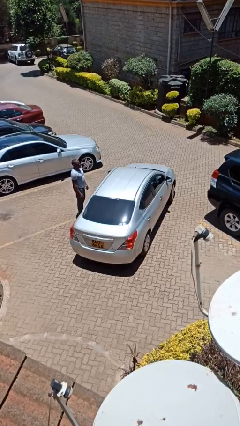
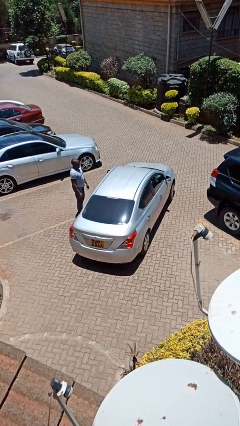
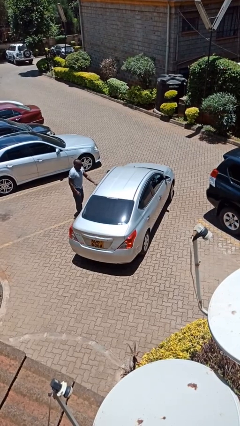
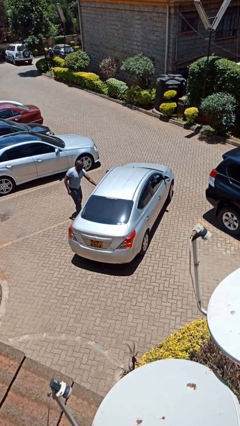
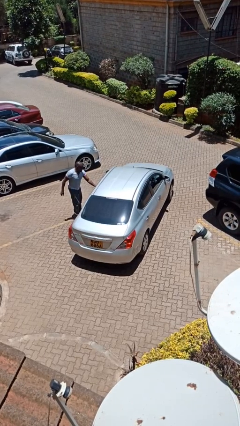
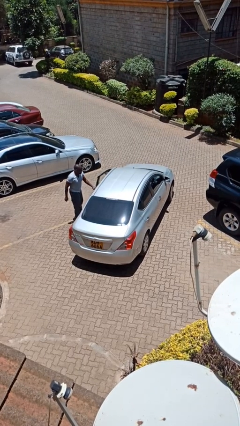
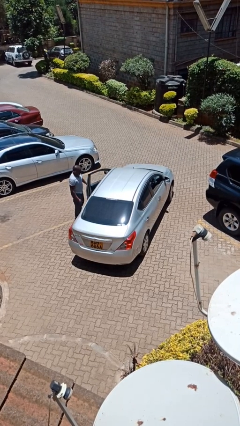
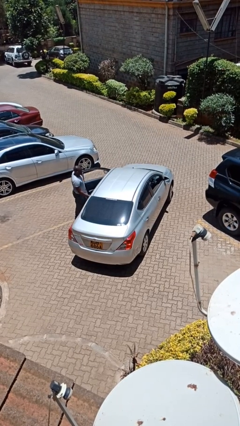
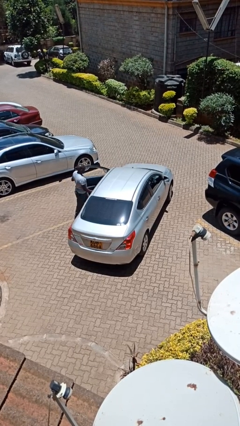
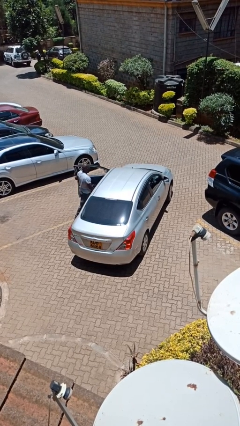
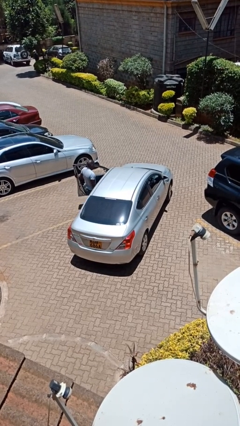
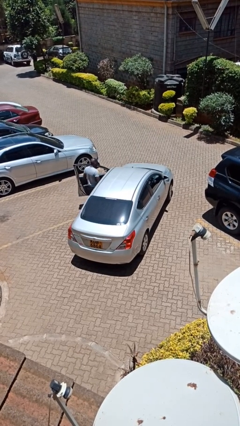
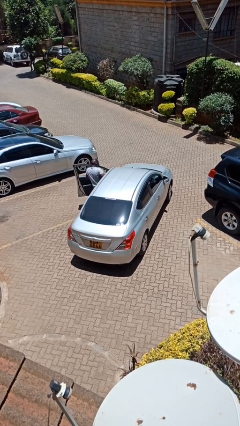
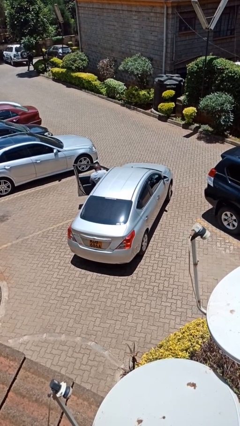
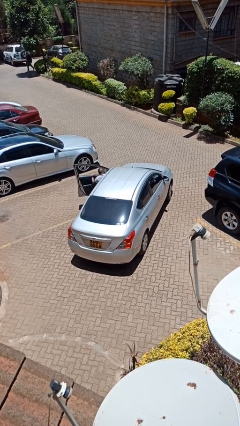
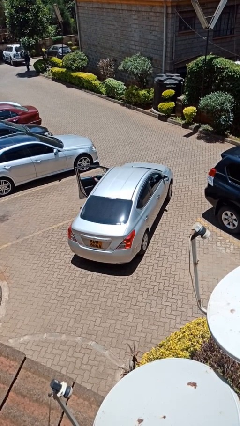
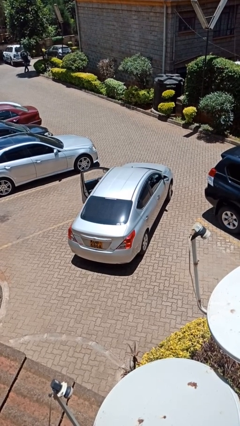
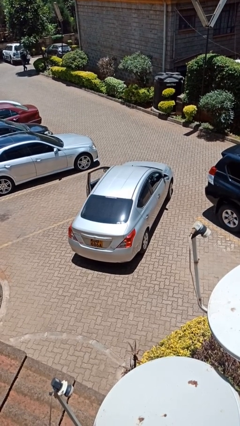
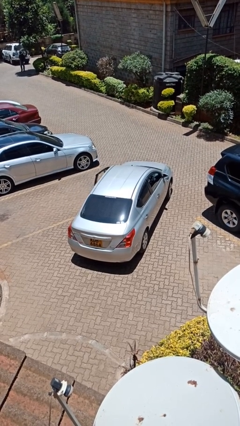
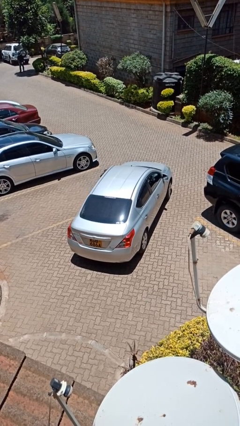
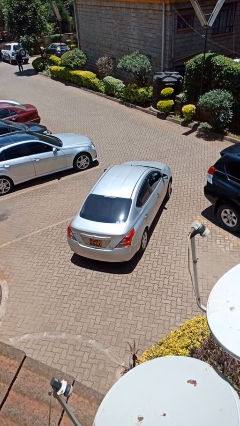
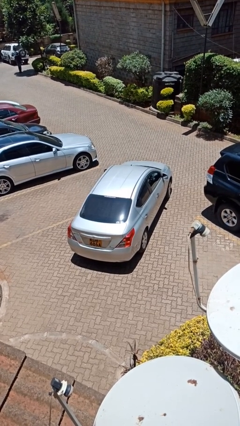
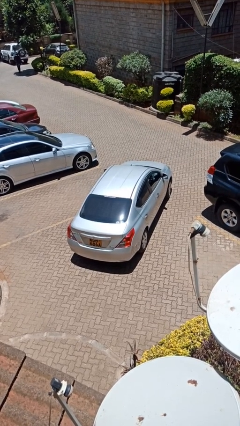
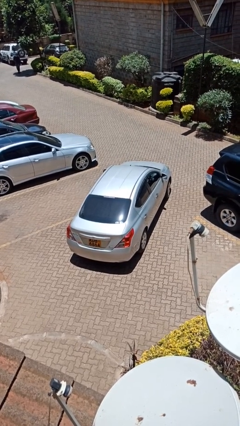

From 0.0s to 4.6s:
car picks up person

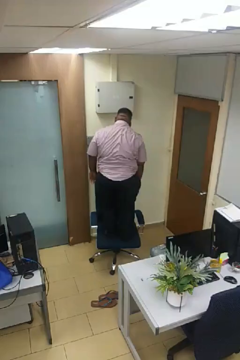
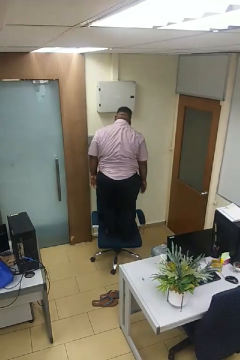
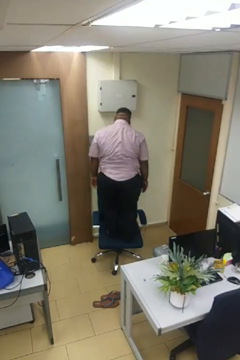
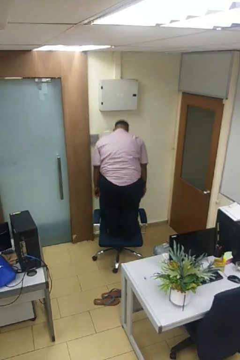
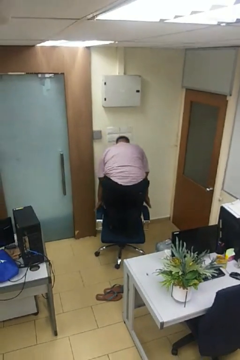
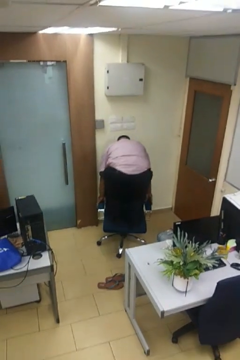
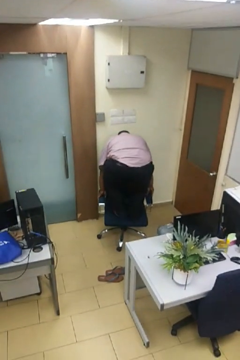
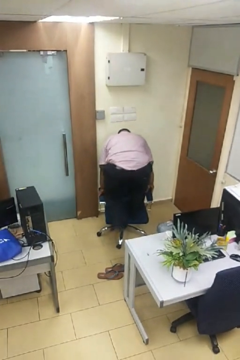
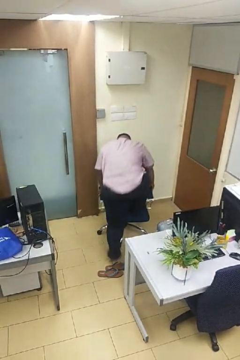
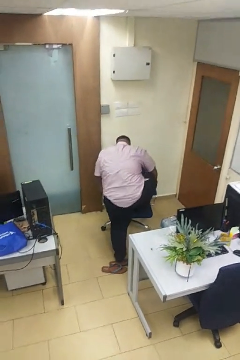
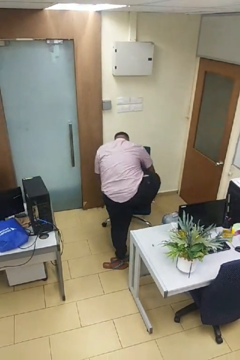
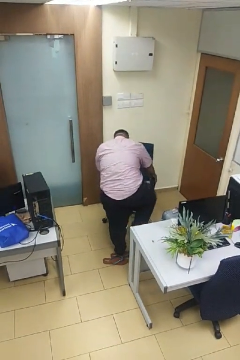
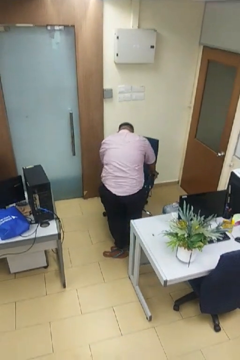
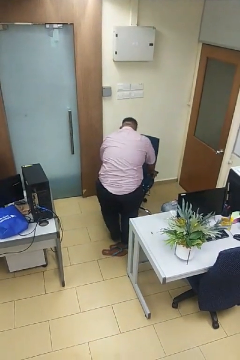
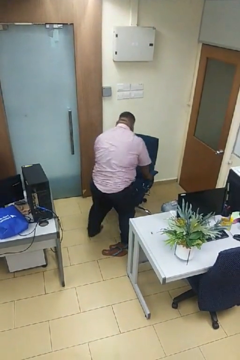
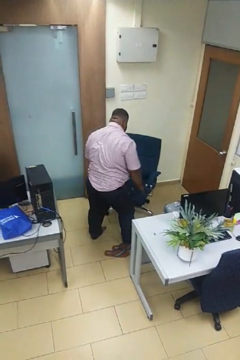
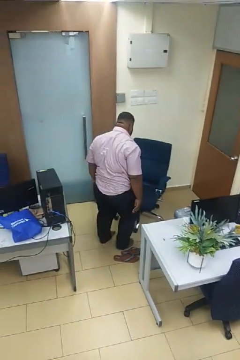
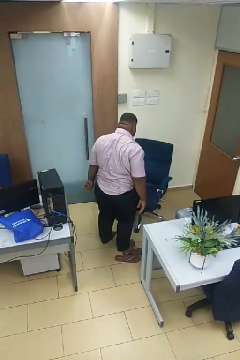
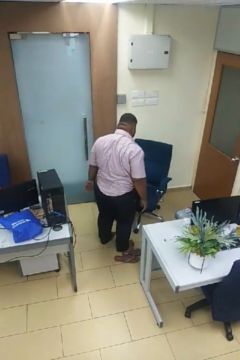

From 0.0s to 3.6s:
person climbs off chair

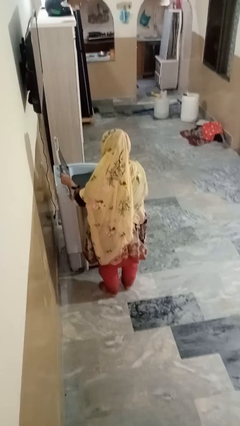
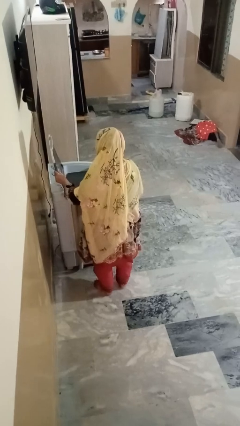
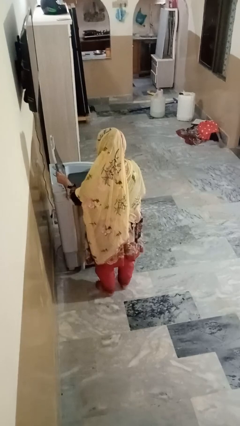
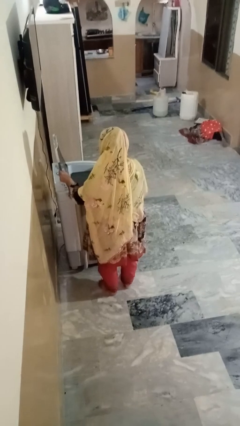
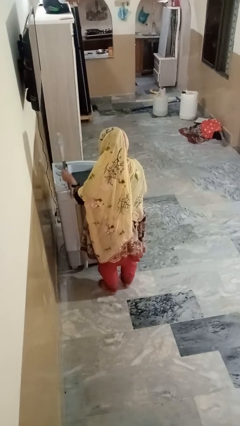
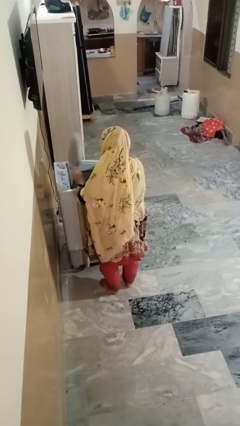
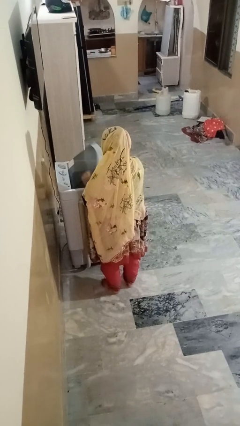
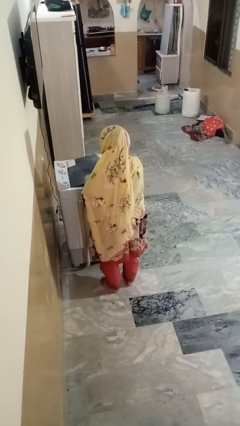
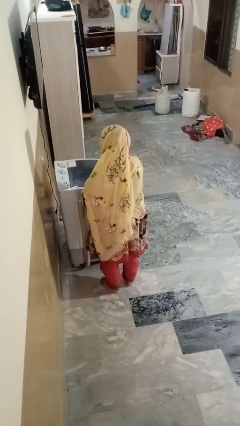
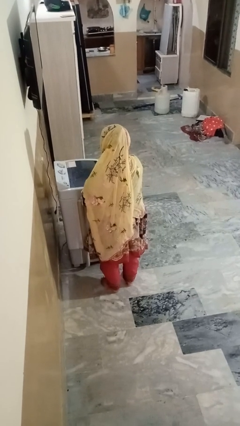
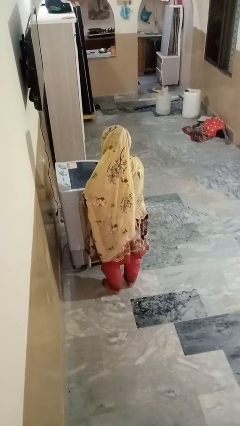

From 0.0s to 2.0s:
person closes clothes washer

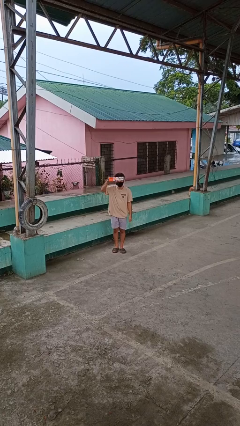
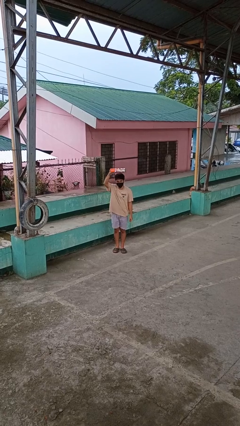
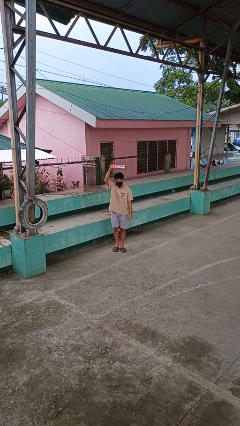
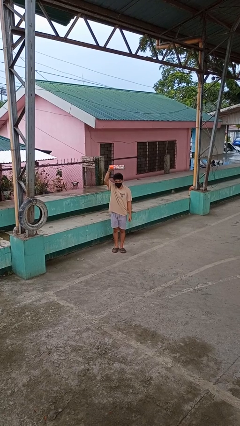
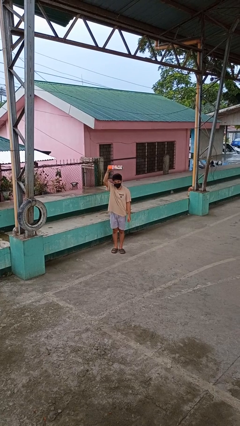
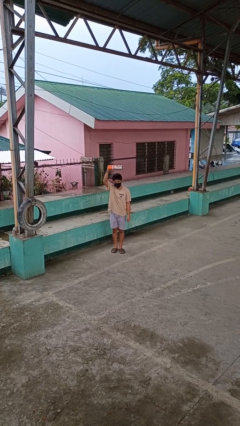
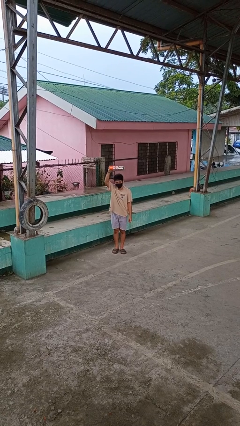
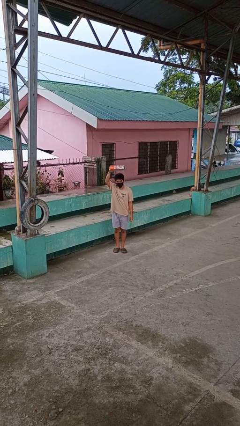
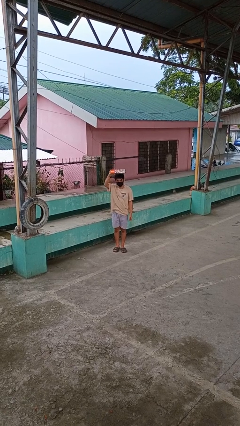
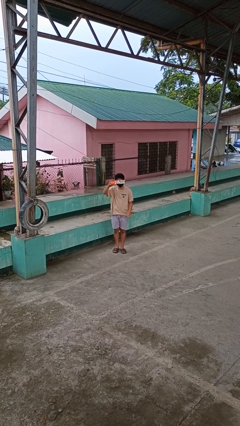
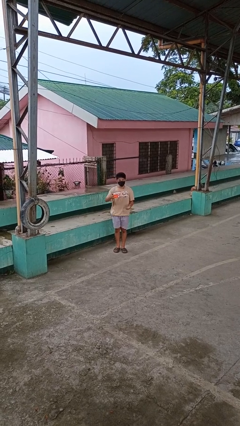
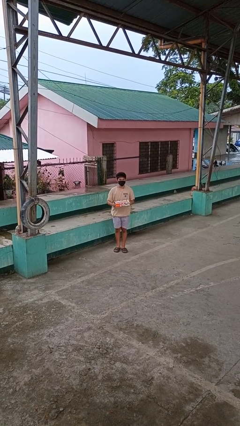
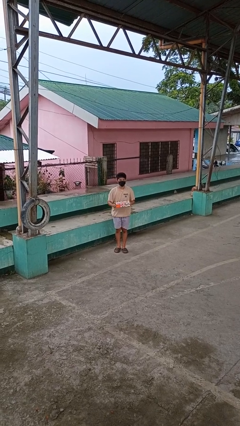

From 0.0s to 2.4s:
person holds object above head

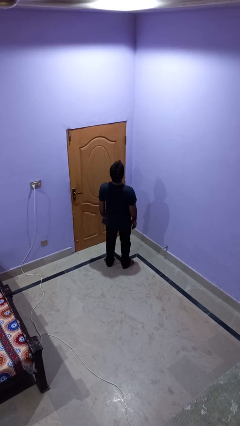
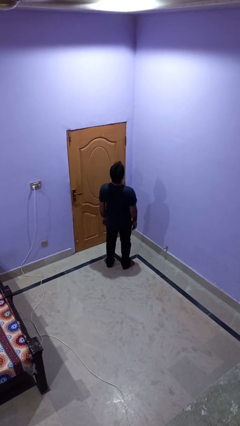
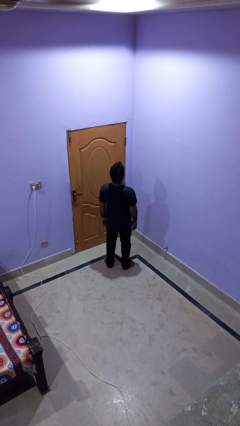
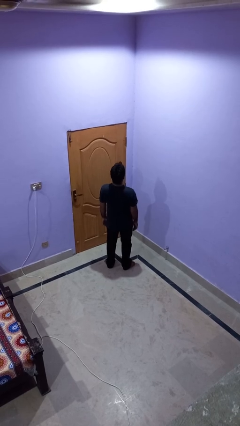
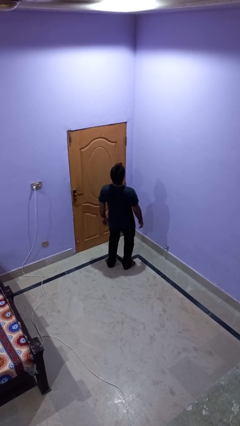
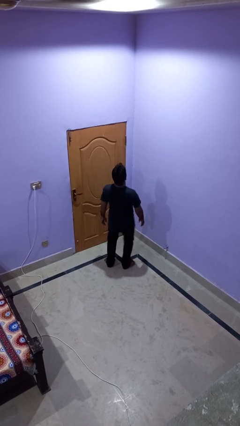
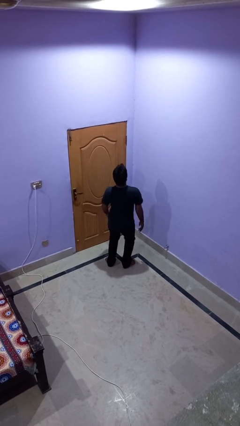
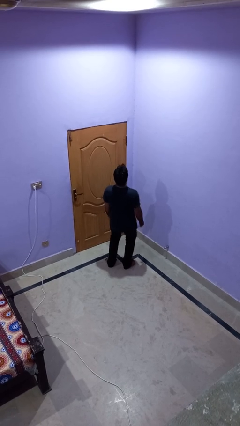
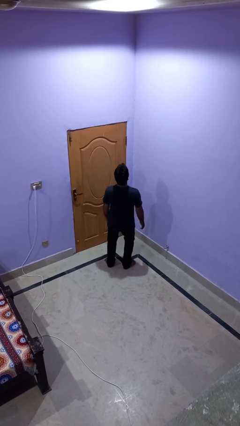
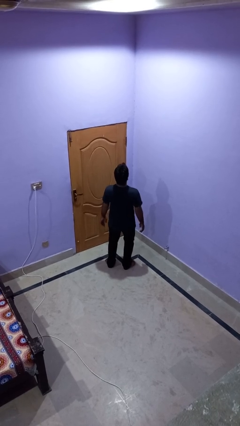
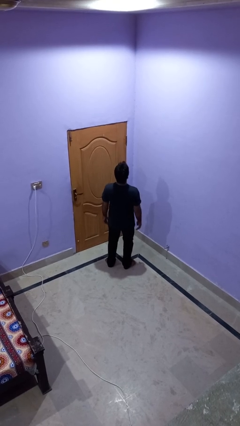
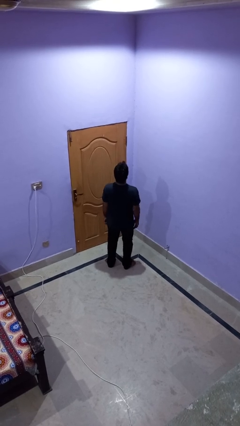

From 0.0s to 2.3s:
person wiggles hips

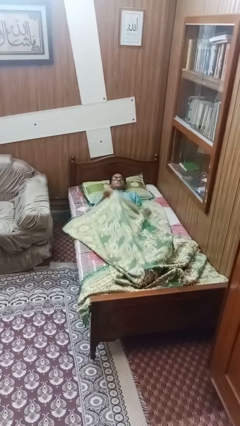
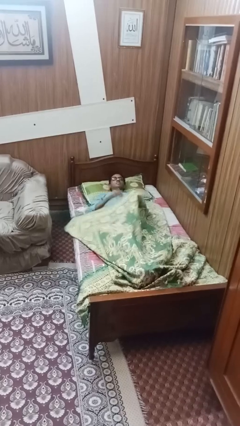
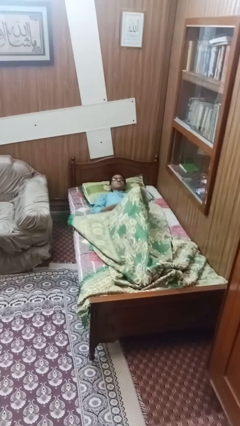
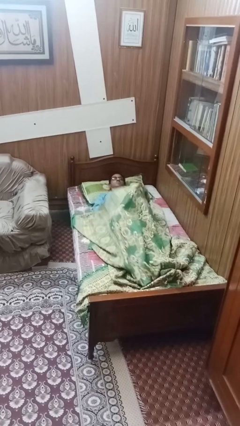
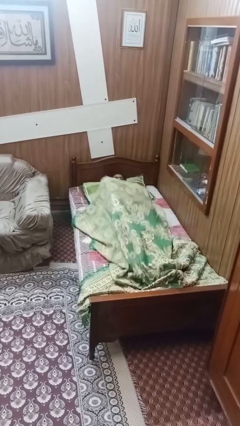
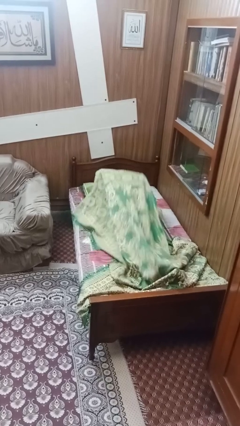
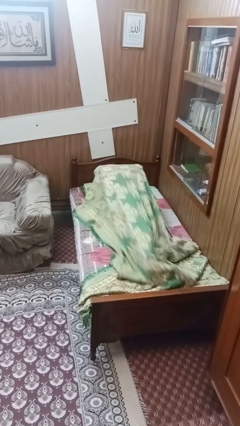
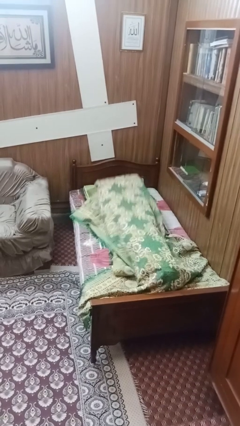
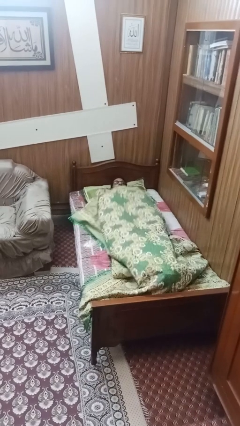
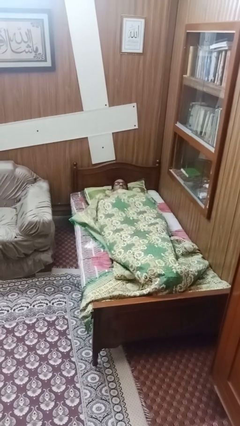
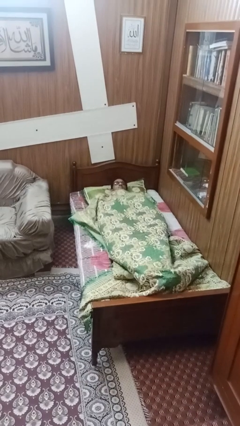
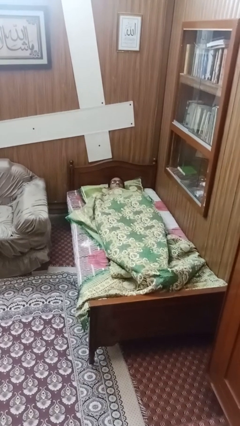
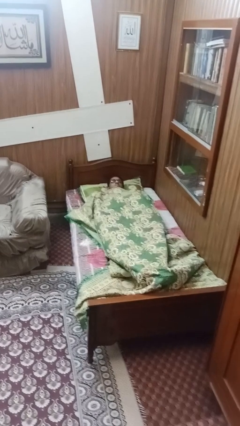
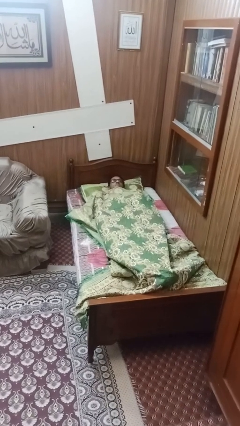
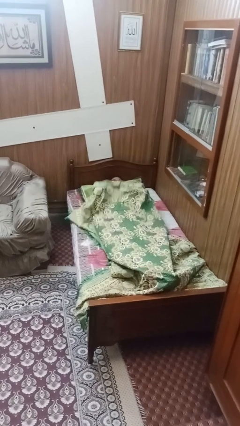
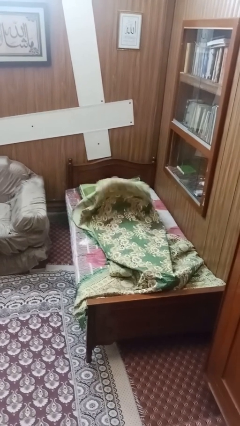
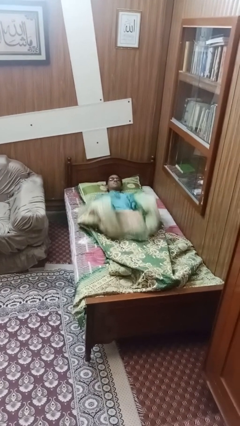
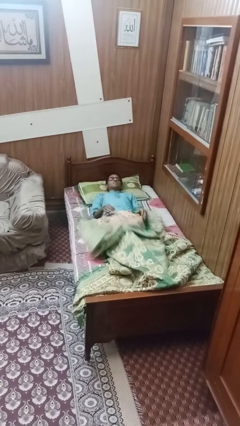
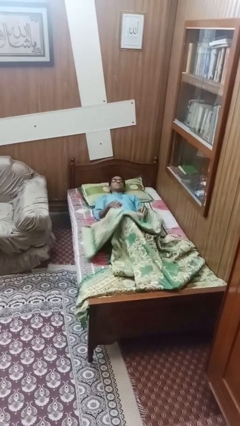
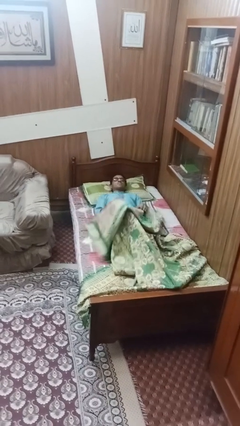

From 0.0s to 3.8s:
person covers with bedsheets
